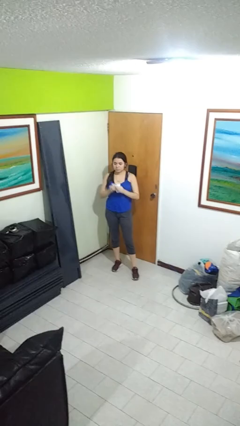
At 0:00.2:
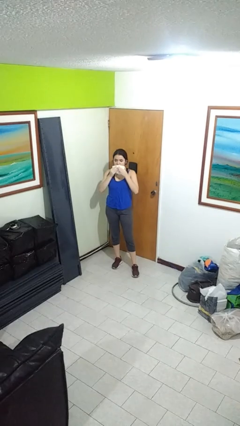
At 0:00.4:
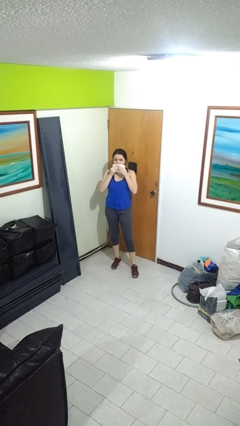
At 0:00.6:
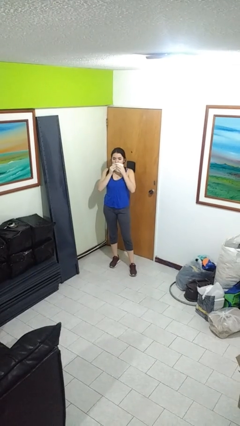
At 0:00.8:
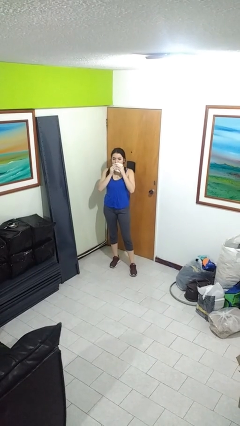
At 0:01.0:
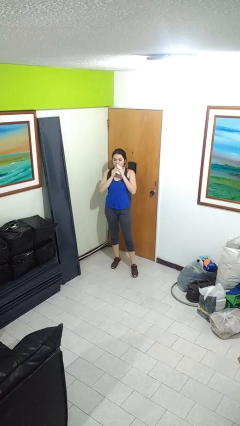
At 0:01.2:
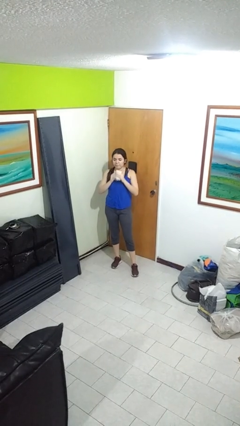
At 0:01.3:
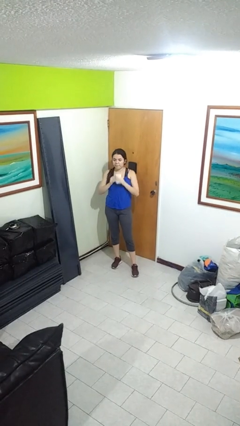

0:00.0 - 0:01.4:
person wipes mouth with napkin

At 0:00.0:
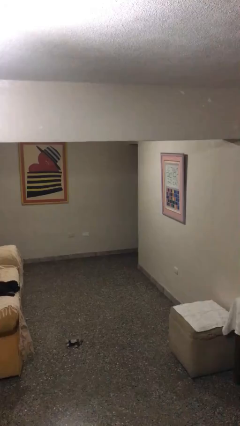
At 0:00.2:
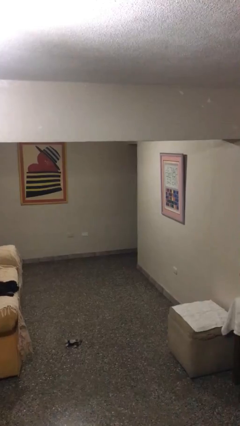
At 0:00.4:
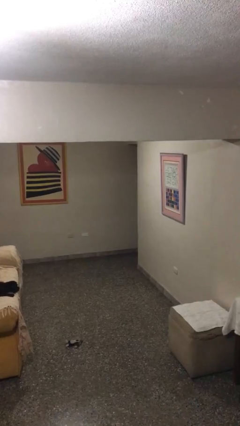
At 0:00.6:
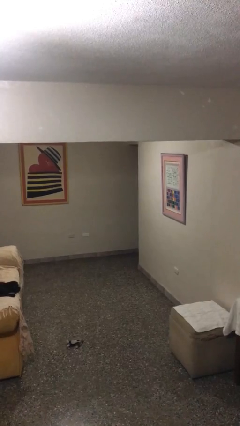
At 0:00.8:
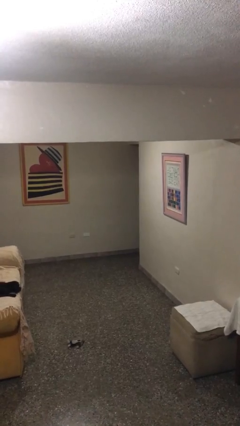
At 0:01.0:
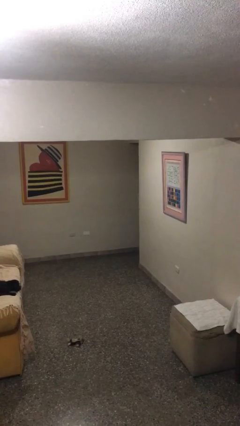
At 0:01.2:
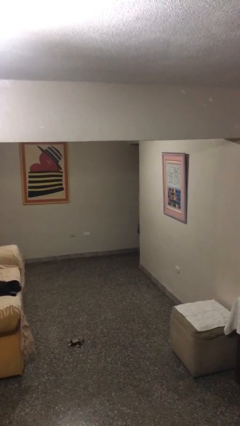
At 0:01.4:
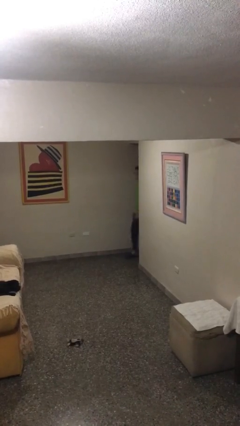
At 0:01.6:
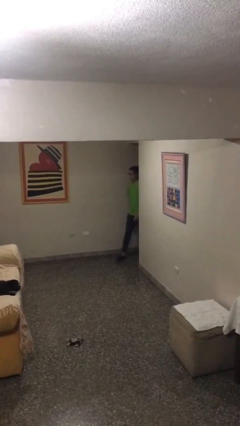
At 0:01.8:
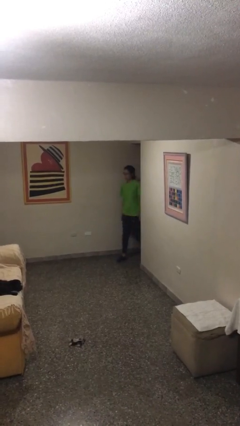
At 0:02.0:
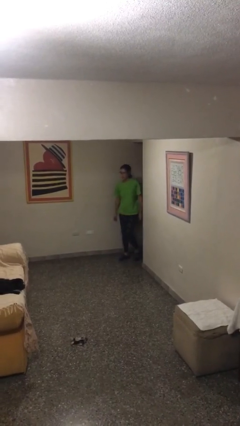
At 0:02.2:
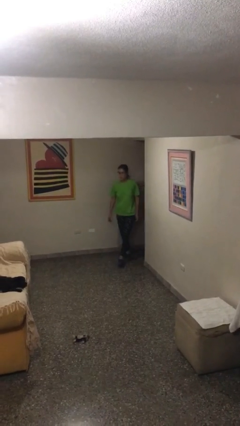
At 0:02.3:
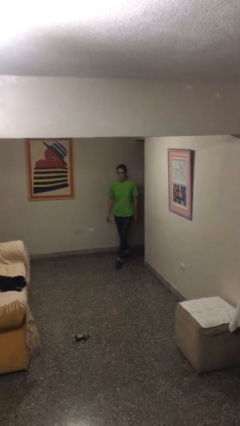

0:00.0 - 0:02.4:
person enters scene through structure

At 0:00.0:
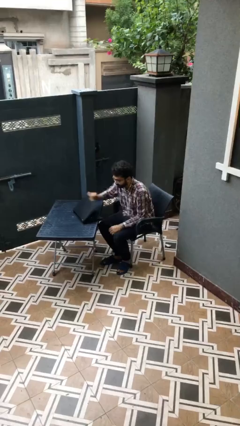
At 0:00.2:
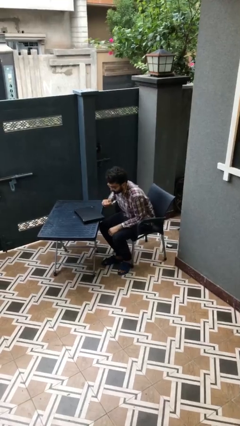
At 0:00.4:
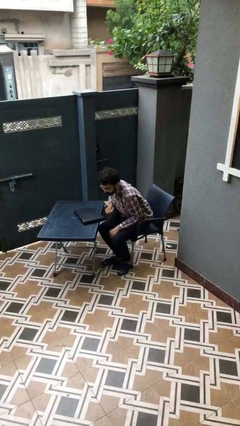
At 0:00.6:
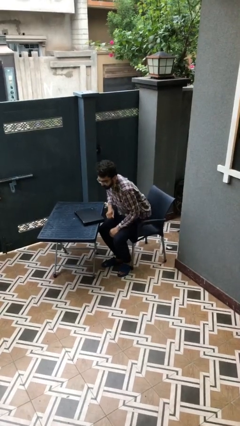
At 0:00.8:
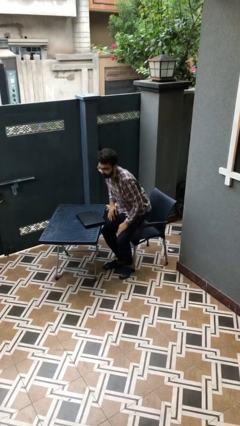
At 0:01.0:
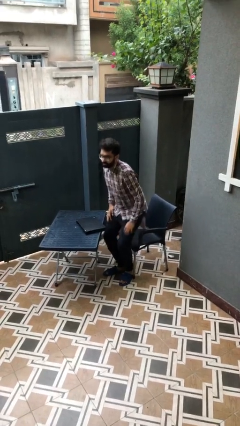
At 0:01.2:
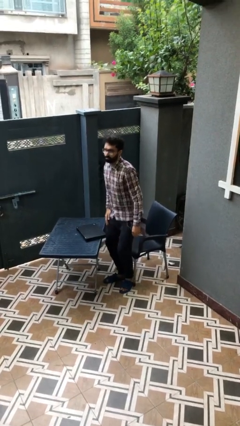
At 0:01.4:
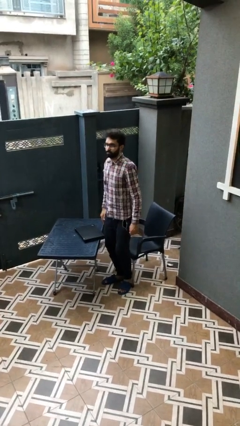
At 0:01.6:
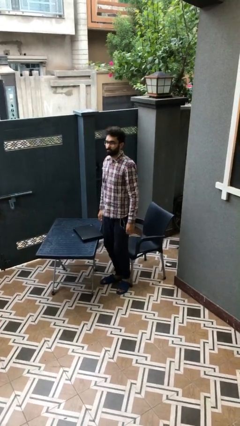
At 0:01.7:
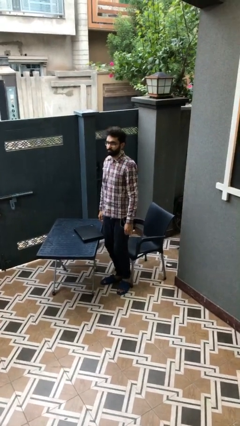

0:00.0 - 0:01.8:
person stands up

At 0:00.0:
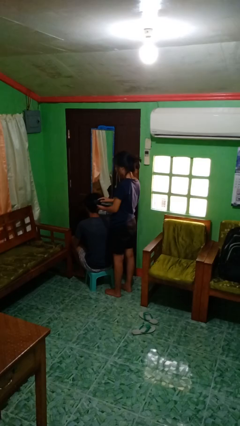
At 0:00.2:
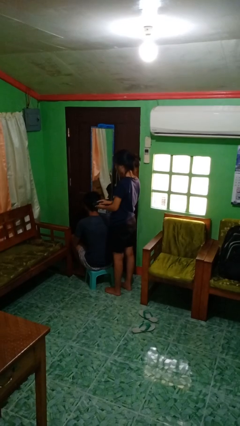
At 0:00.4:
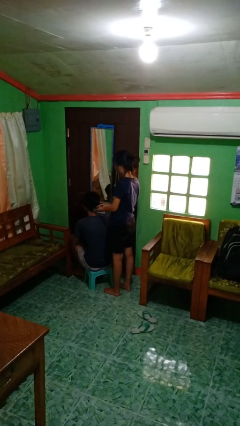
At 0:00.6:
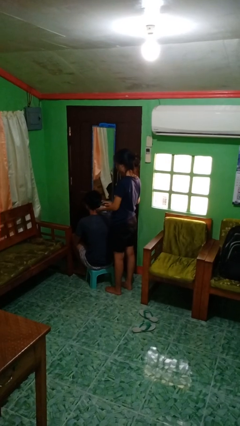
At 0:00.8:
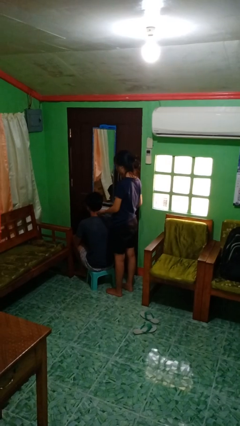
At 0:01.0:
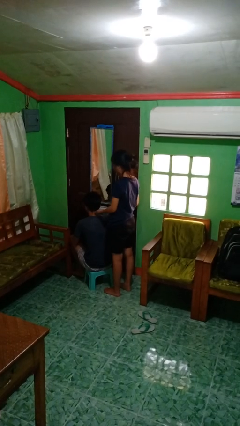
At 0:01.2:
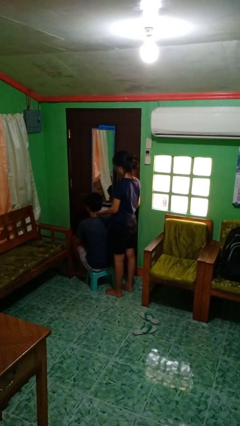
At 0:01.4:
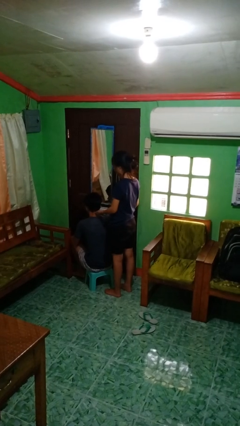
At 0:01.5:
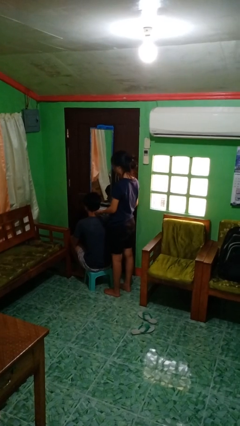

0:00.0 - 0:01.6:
person brushes hair of person

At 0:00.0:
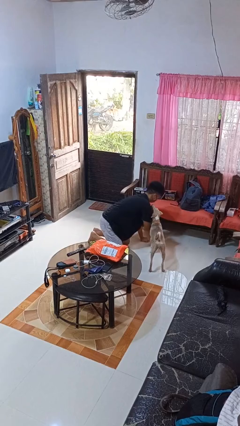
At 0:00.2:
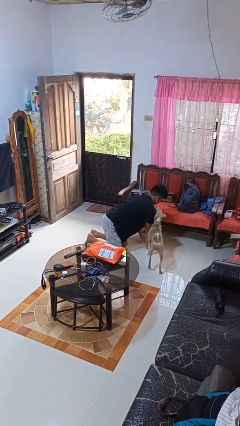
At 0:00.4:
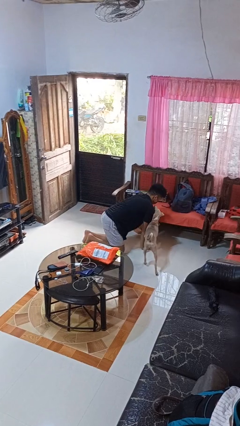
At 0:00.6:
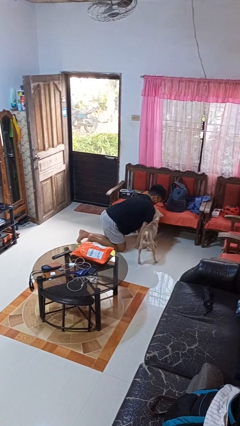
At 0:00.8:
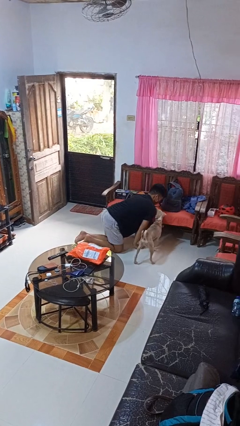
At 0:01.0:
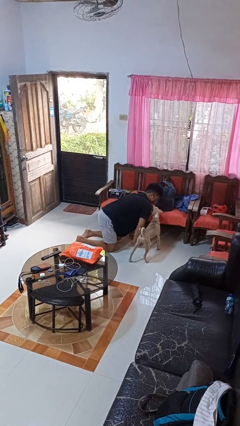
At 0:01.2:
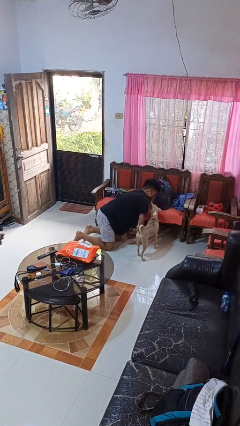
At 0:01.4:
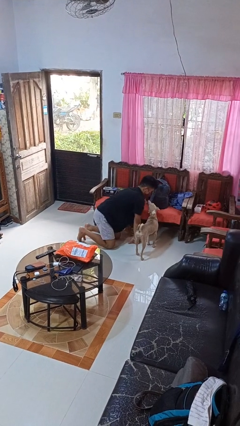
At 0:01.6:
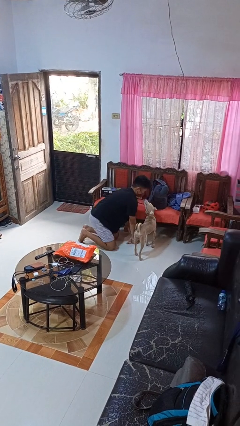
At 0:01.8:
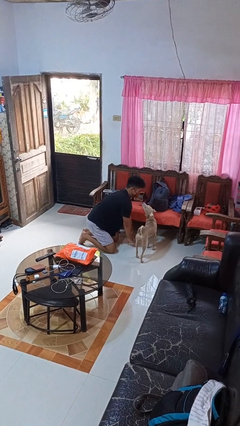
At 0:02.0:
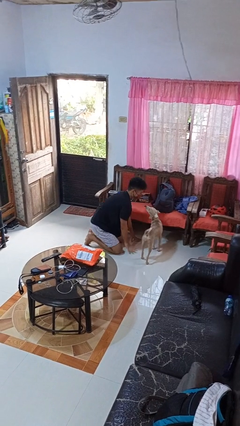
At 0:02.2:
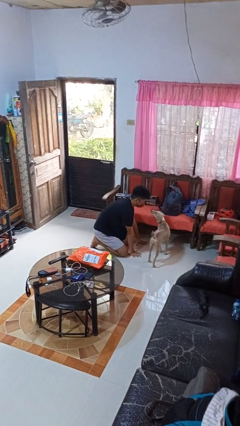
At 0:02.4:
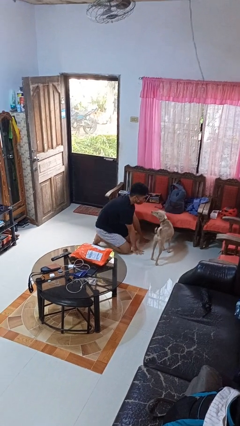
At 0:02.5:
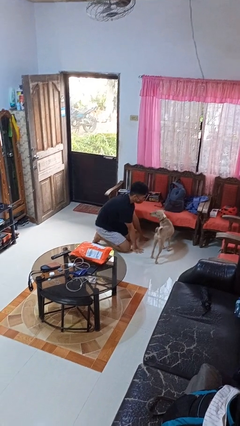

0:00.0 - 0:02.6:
person crawls

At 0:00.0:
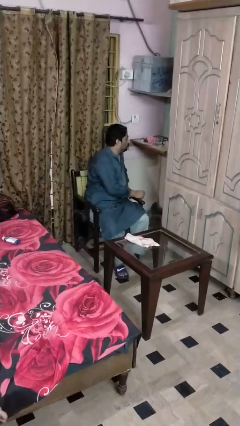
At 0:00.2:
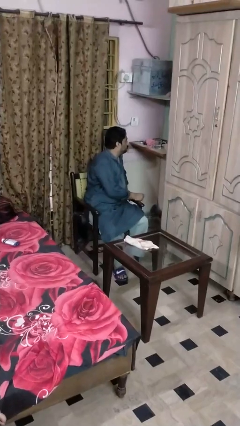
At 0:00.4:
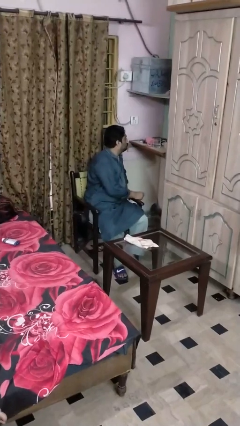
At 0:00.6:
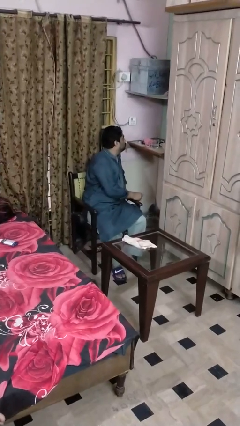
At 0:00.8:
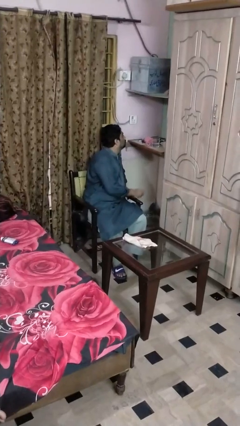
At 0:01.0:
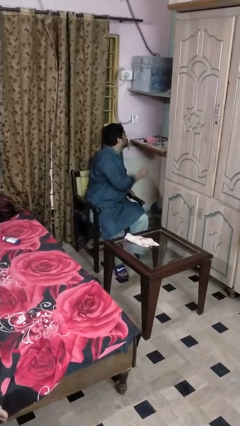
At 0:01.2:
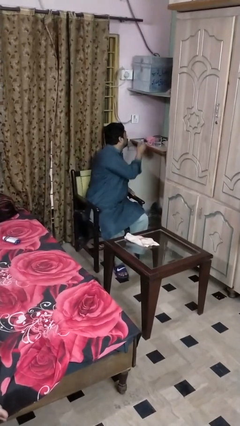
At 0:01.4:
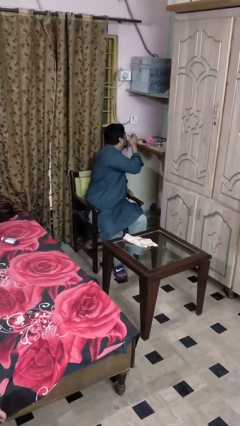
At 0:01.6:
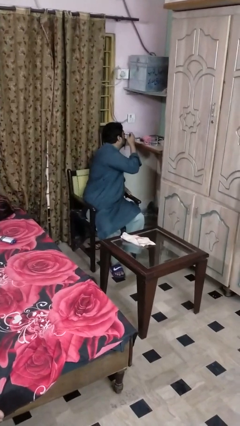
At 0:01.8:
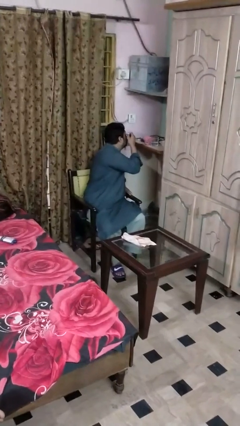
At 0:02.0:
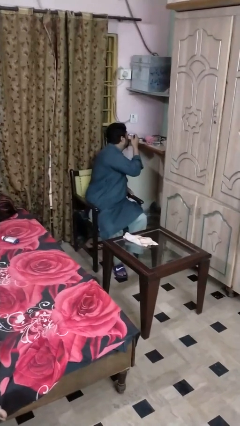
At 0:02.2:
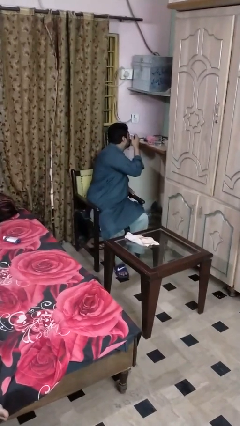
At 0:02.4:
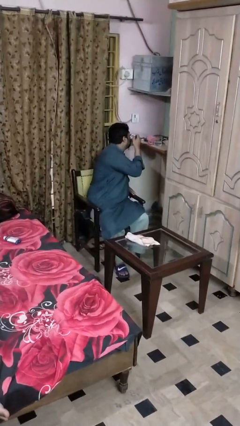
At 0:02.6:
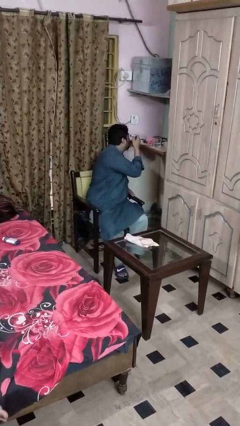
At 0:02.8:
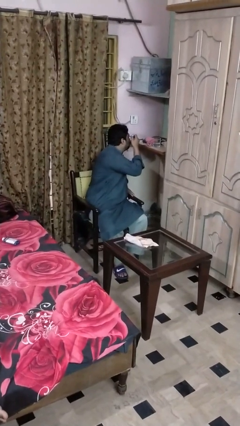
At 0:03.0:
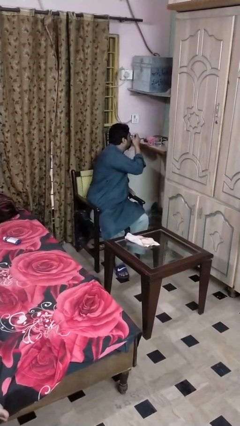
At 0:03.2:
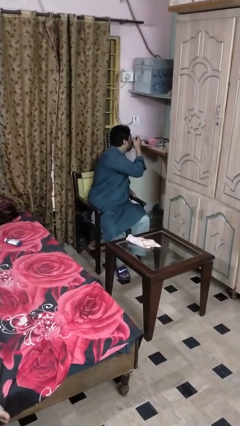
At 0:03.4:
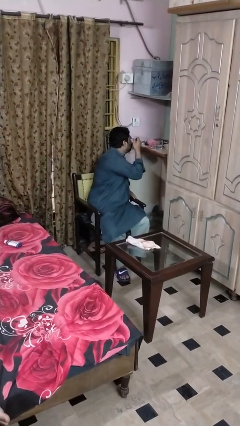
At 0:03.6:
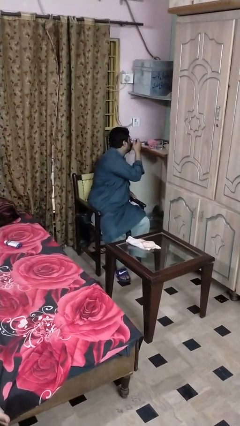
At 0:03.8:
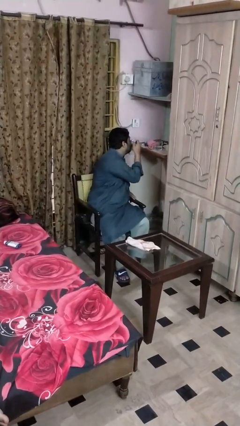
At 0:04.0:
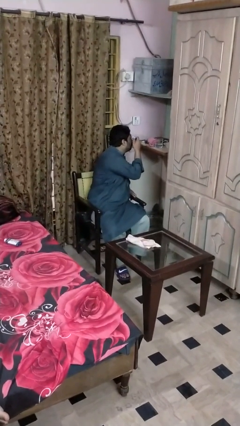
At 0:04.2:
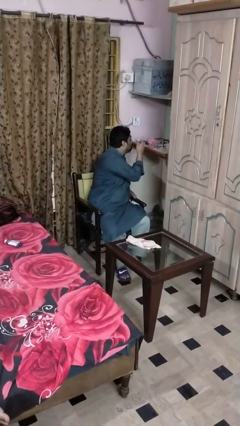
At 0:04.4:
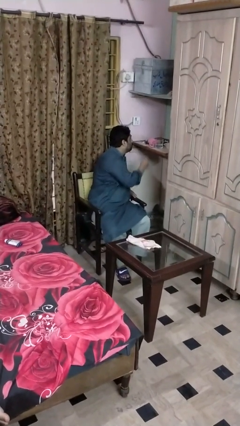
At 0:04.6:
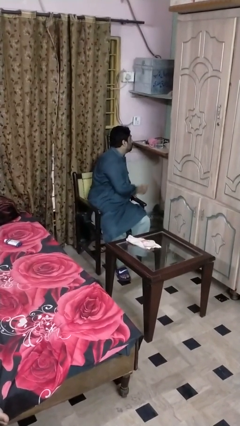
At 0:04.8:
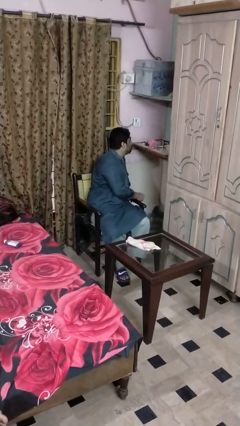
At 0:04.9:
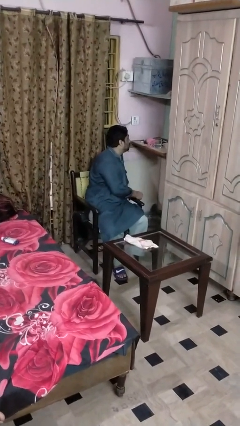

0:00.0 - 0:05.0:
person applies eye makeup

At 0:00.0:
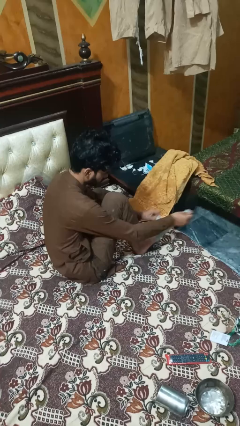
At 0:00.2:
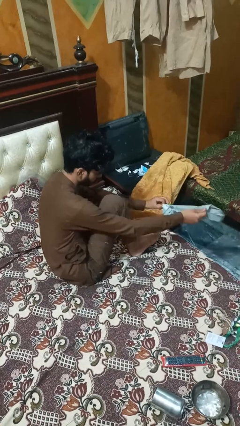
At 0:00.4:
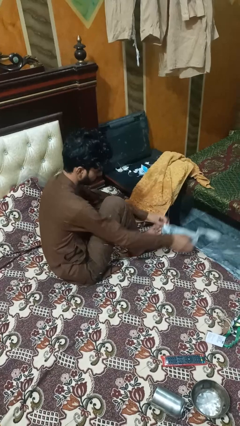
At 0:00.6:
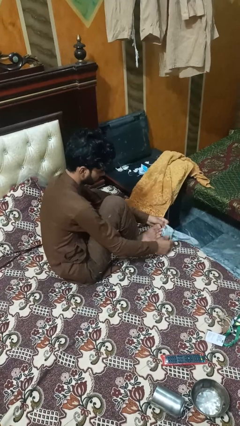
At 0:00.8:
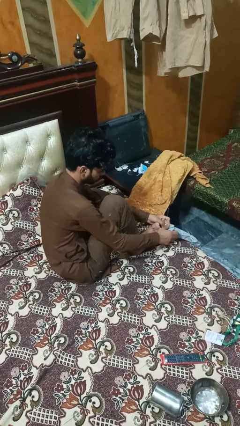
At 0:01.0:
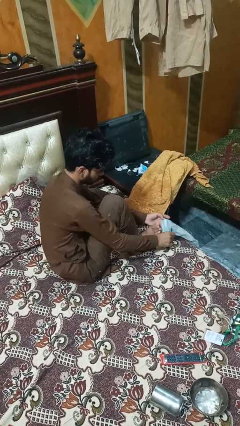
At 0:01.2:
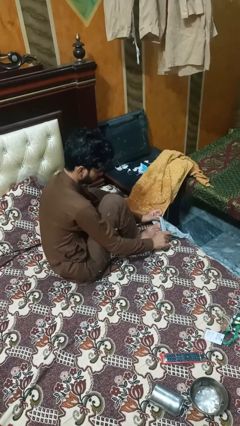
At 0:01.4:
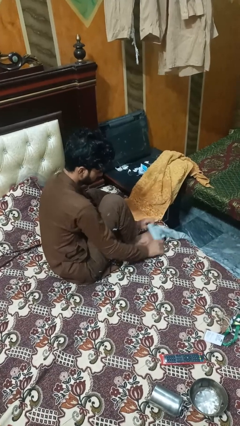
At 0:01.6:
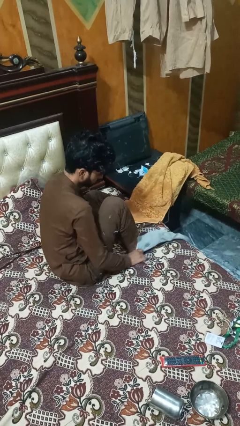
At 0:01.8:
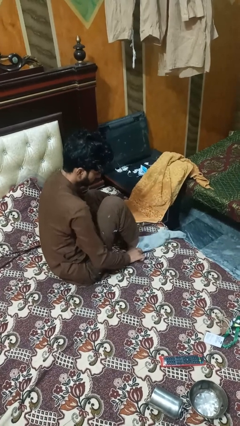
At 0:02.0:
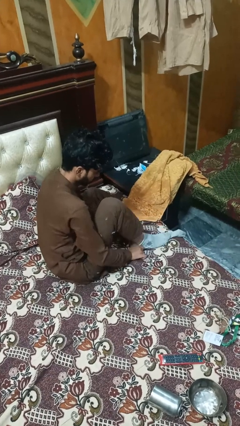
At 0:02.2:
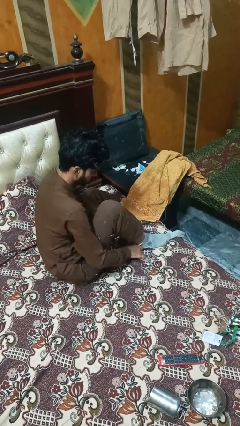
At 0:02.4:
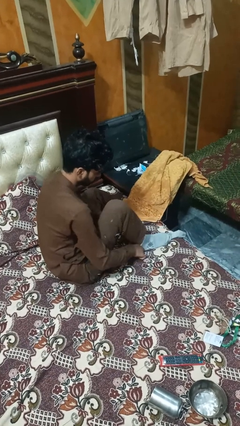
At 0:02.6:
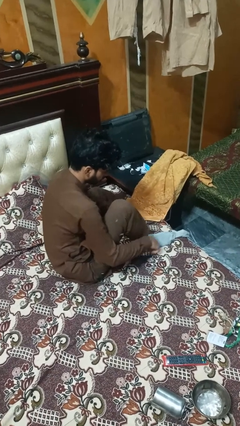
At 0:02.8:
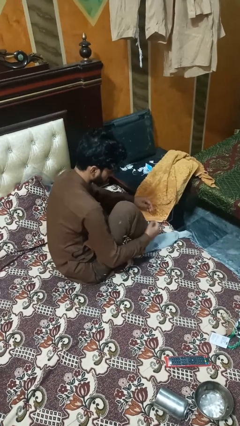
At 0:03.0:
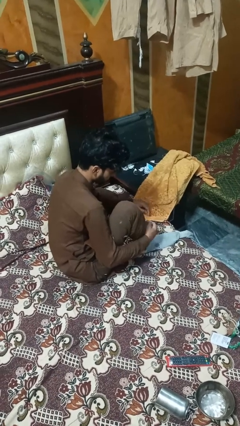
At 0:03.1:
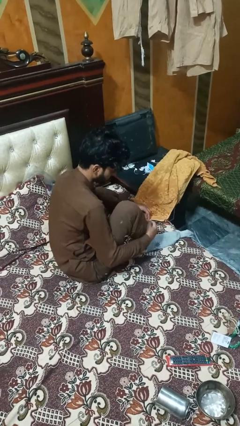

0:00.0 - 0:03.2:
person puts on socks
